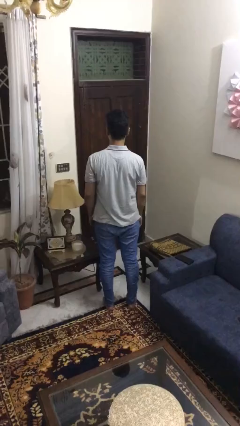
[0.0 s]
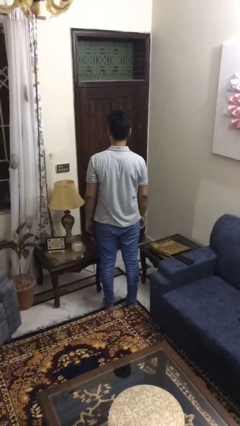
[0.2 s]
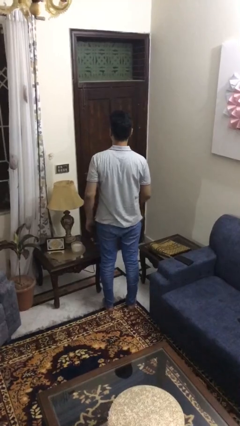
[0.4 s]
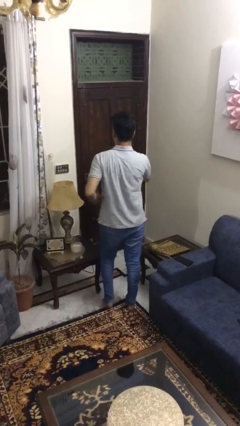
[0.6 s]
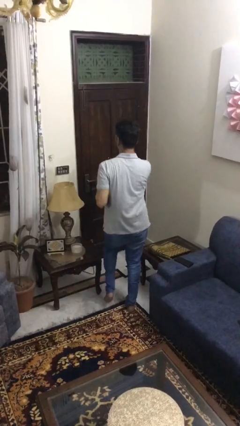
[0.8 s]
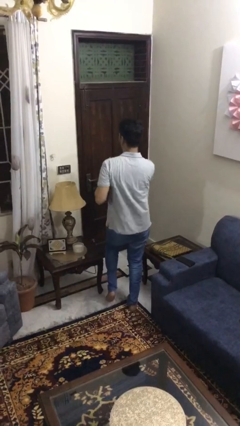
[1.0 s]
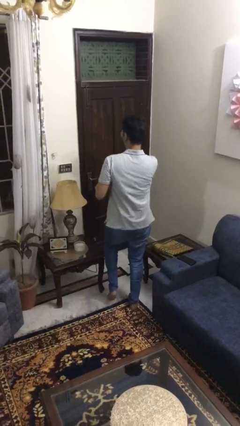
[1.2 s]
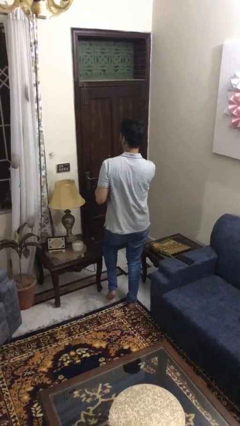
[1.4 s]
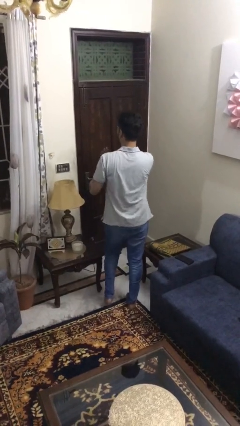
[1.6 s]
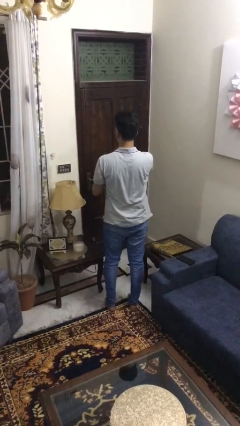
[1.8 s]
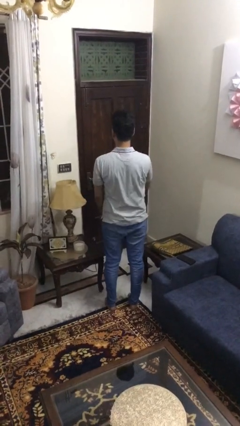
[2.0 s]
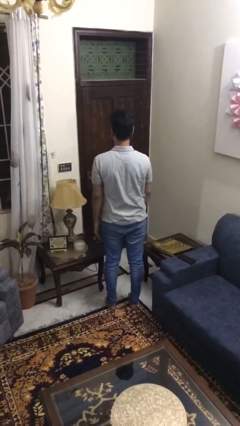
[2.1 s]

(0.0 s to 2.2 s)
person dances in place

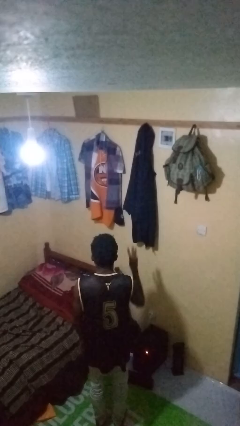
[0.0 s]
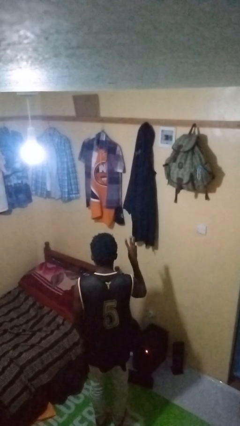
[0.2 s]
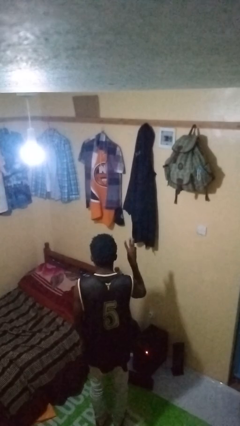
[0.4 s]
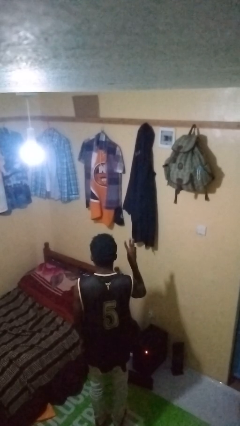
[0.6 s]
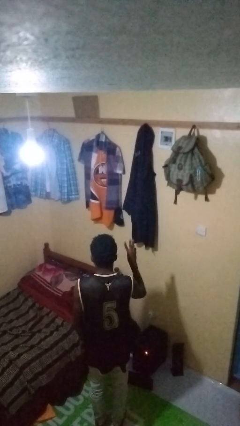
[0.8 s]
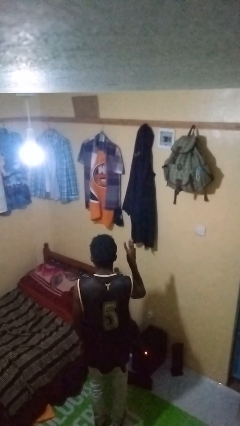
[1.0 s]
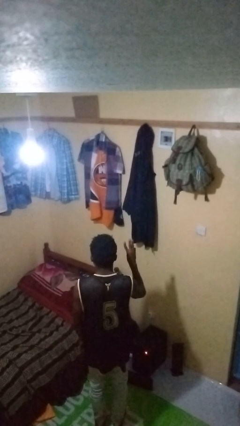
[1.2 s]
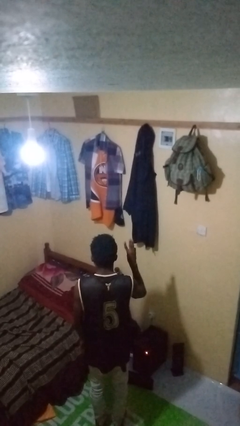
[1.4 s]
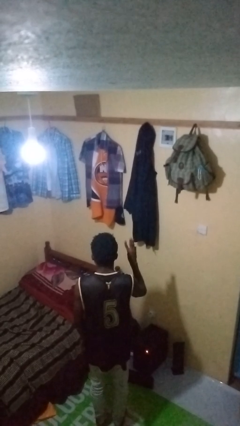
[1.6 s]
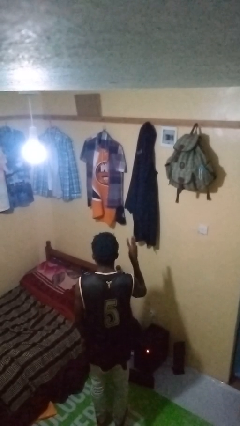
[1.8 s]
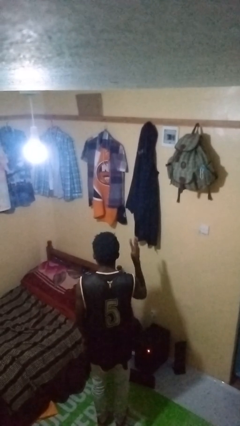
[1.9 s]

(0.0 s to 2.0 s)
person gestures number three

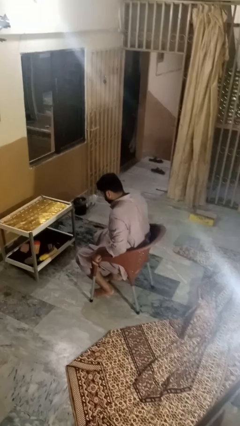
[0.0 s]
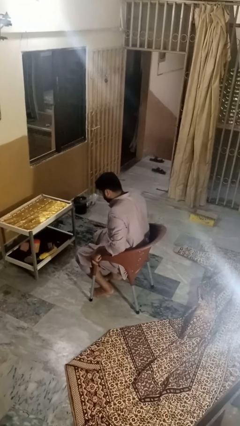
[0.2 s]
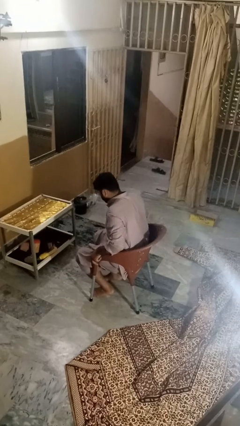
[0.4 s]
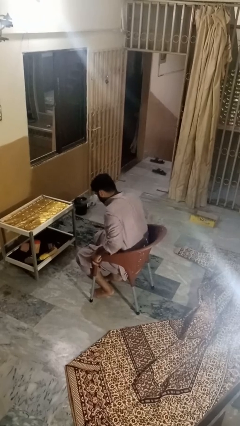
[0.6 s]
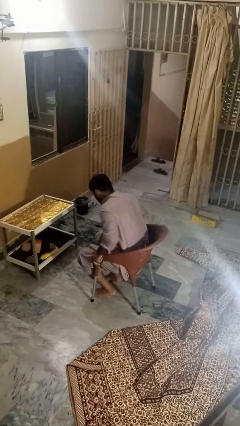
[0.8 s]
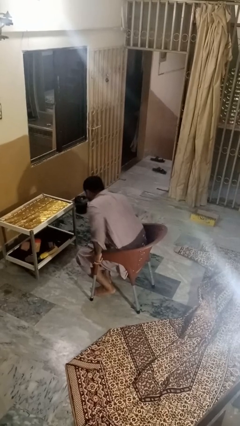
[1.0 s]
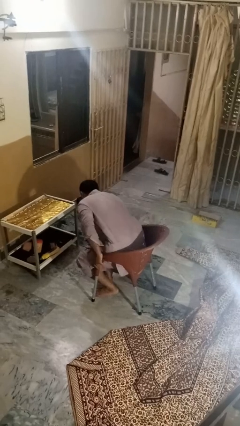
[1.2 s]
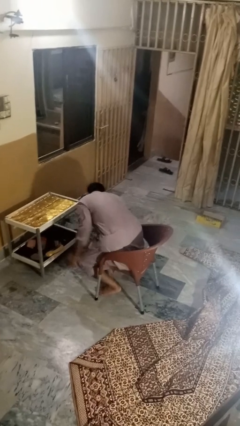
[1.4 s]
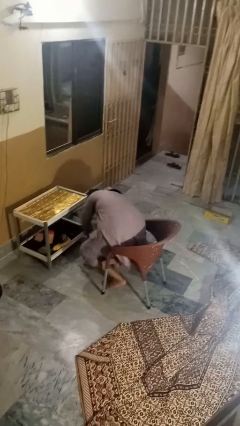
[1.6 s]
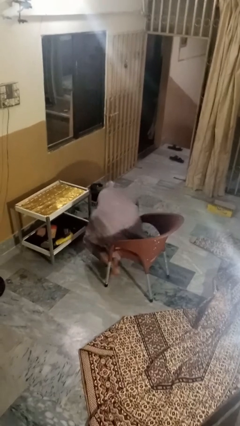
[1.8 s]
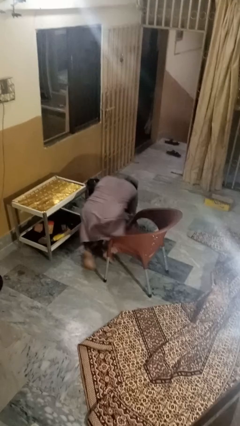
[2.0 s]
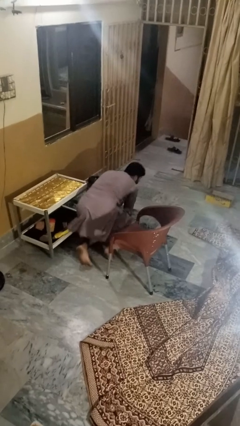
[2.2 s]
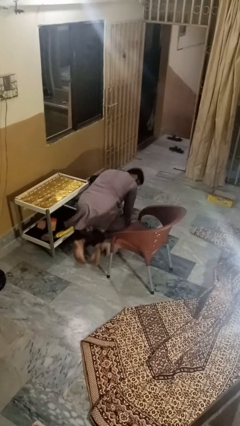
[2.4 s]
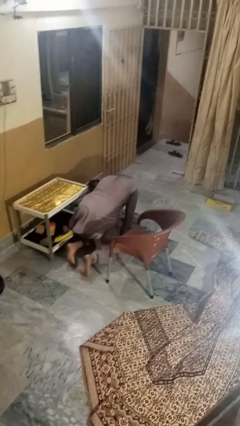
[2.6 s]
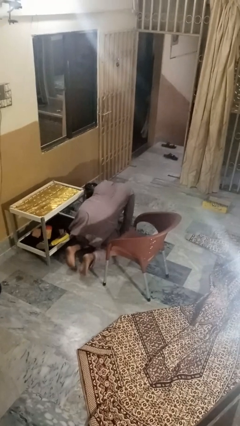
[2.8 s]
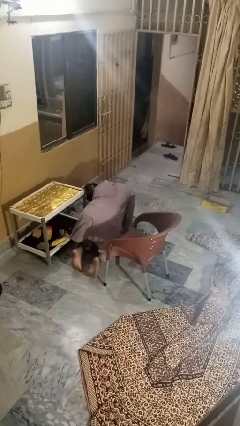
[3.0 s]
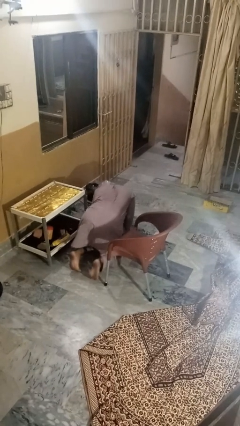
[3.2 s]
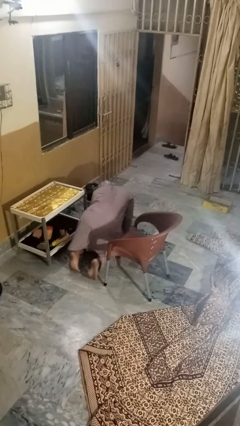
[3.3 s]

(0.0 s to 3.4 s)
person falls from chair

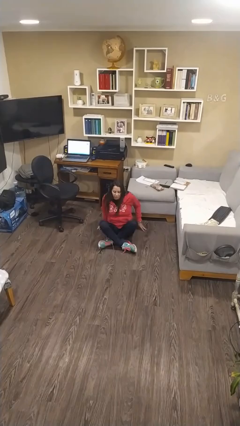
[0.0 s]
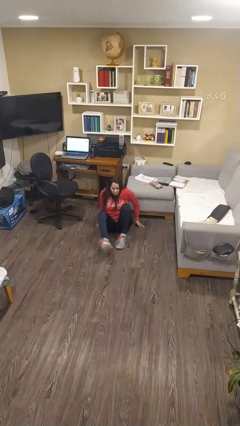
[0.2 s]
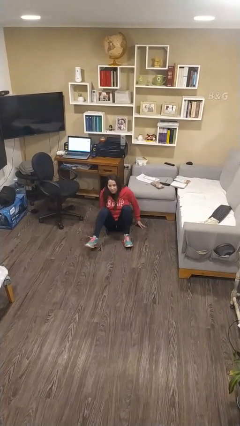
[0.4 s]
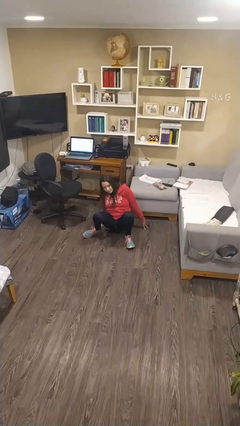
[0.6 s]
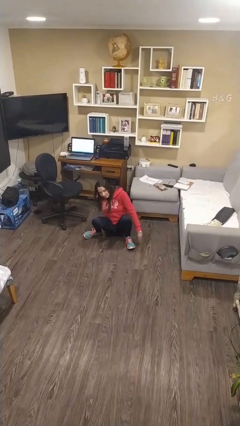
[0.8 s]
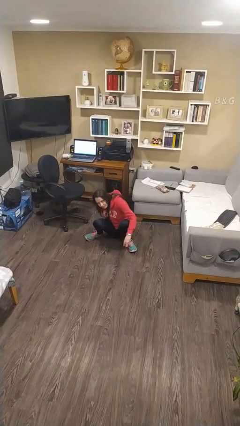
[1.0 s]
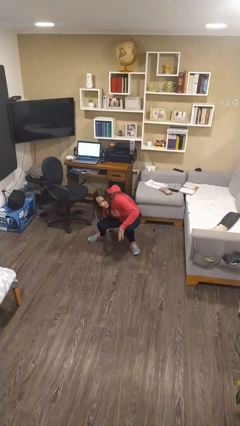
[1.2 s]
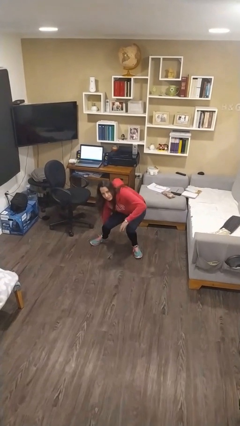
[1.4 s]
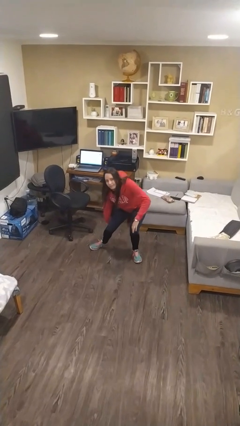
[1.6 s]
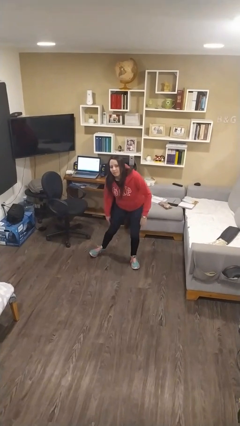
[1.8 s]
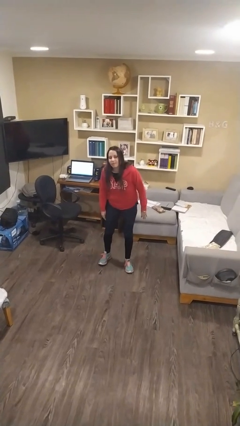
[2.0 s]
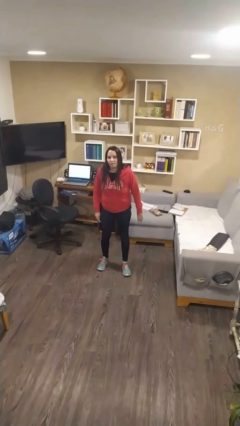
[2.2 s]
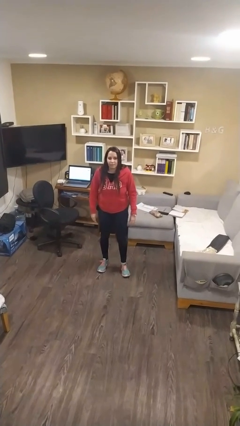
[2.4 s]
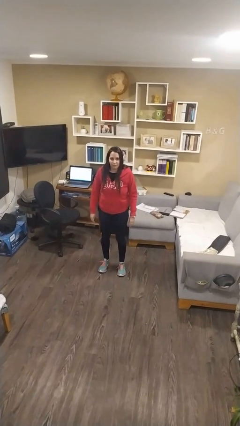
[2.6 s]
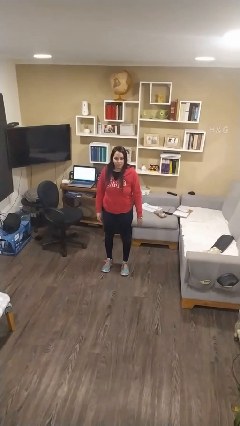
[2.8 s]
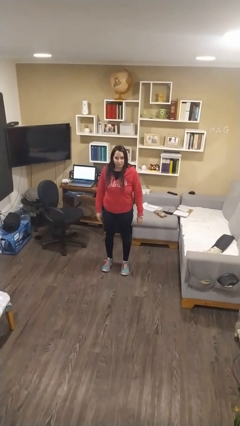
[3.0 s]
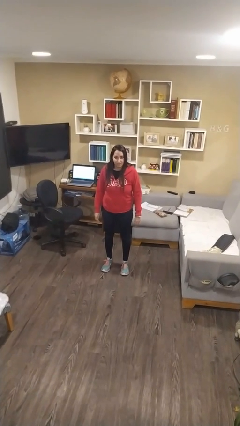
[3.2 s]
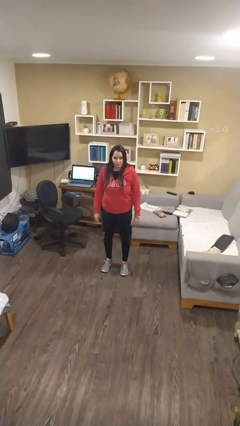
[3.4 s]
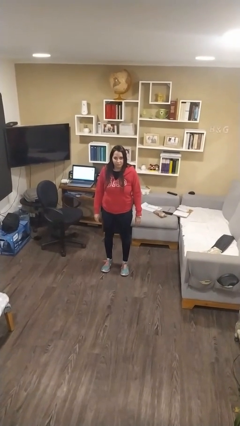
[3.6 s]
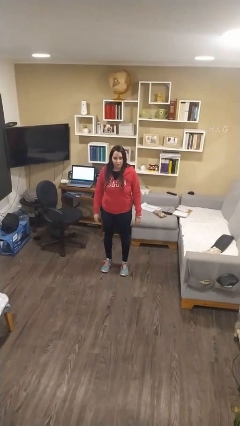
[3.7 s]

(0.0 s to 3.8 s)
person stands up from floor

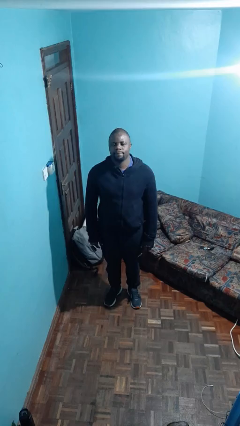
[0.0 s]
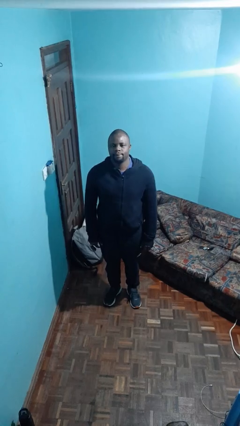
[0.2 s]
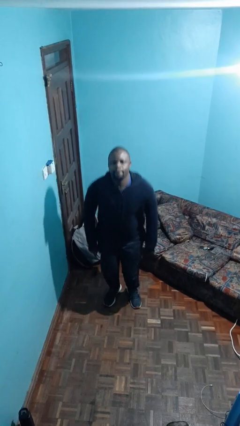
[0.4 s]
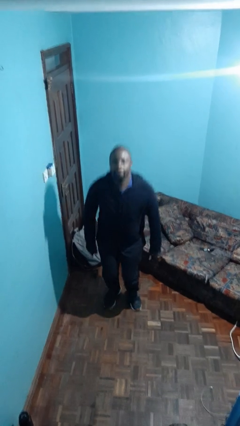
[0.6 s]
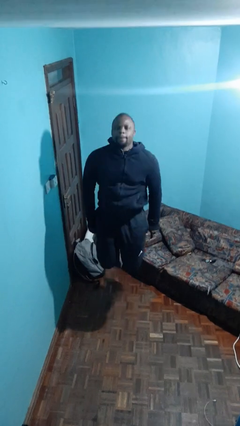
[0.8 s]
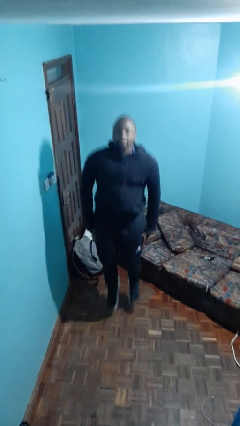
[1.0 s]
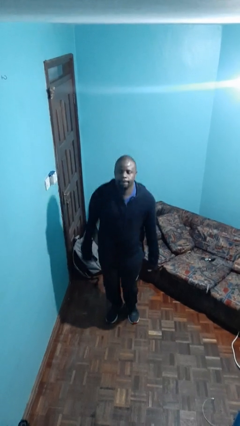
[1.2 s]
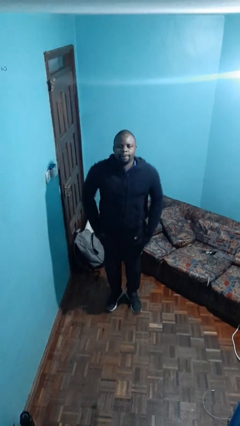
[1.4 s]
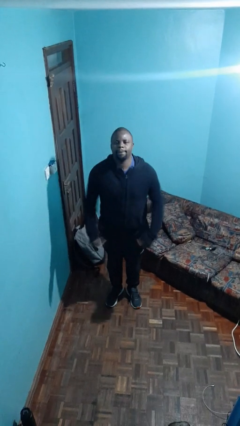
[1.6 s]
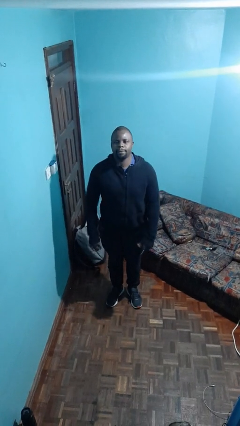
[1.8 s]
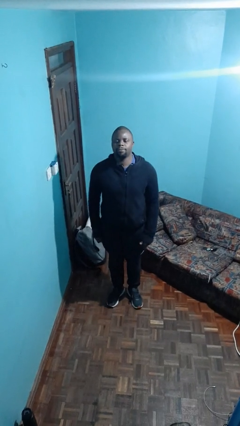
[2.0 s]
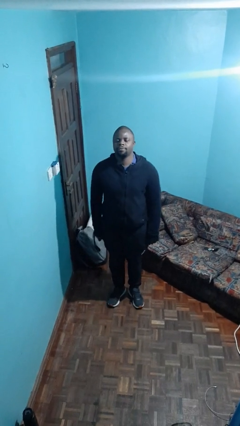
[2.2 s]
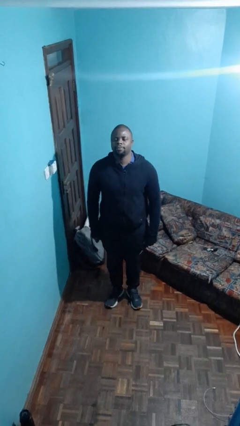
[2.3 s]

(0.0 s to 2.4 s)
person jumps

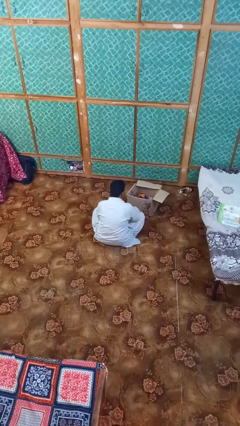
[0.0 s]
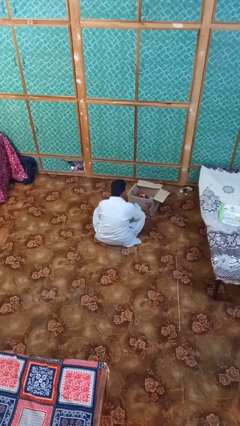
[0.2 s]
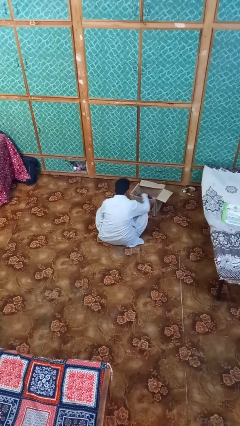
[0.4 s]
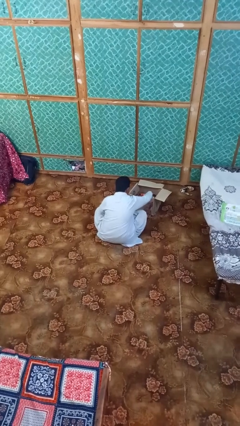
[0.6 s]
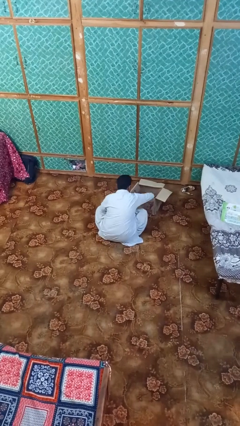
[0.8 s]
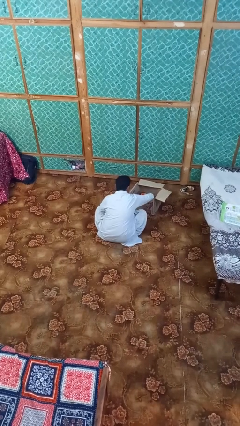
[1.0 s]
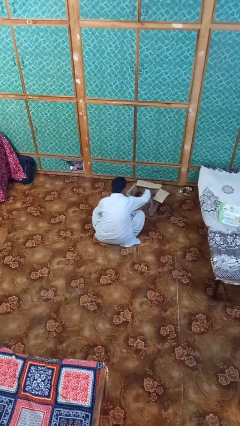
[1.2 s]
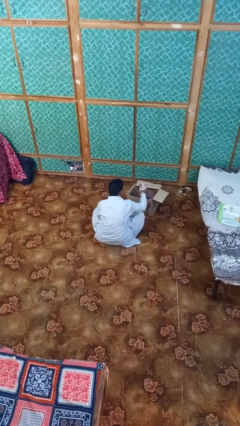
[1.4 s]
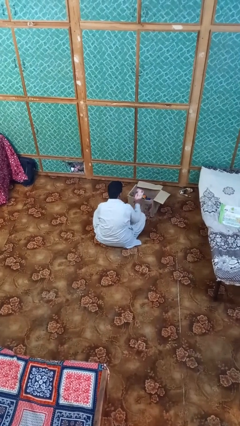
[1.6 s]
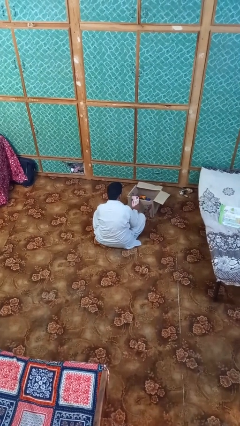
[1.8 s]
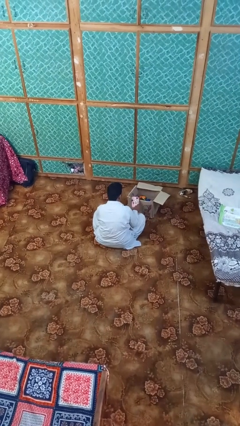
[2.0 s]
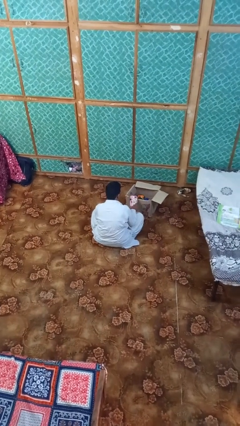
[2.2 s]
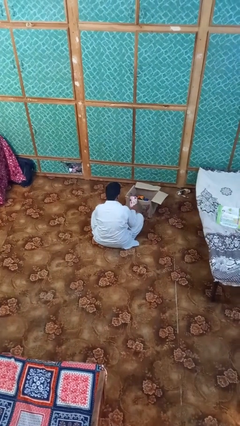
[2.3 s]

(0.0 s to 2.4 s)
person takes object from box

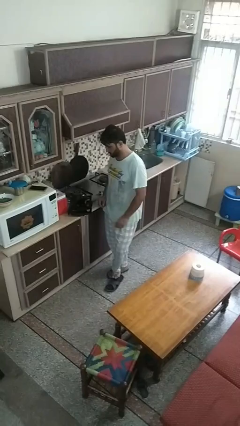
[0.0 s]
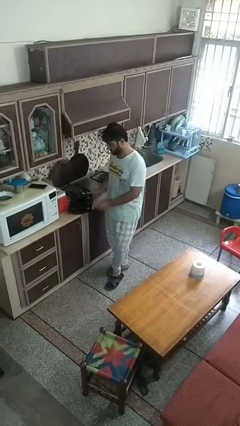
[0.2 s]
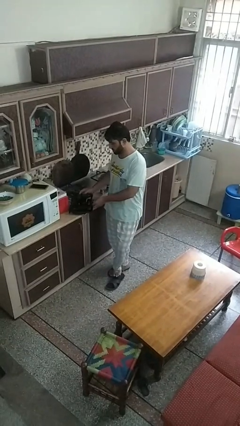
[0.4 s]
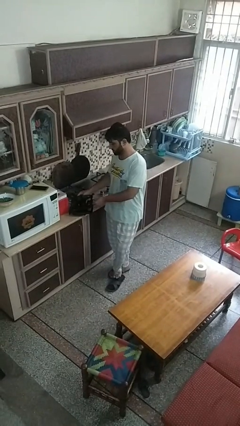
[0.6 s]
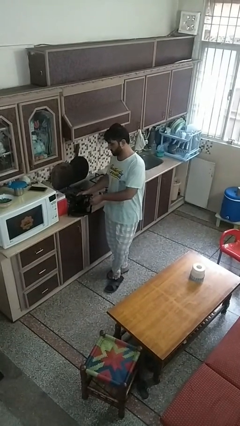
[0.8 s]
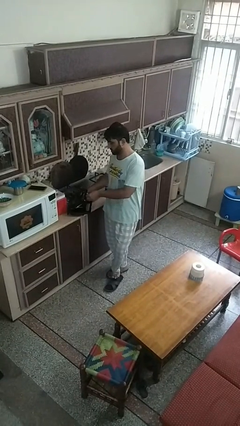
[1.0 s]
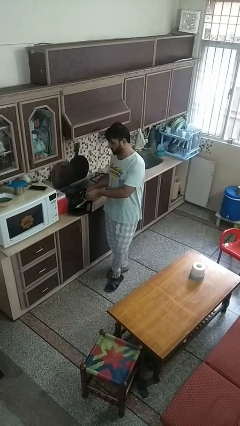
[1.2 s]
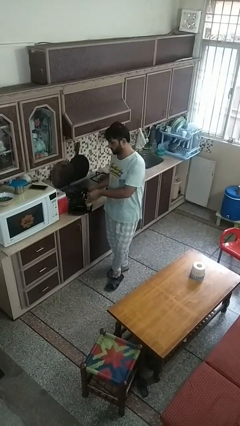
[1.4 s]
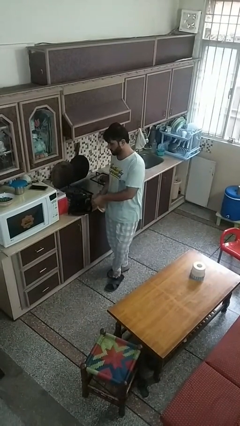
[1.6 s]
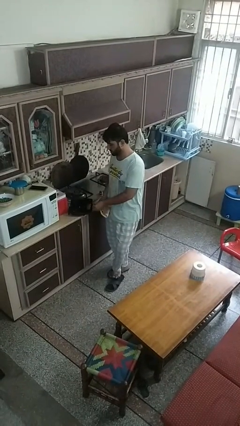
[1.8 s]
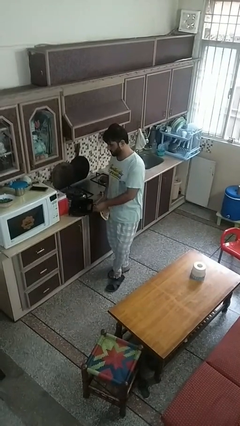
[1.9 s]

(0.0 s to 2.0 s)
person takes object from toaster
